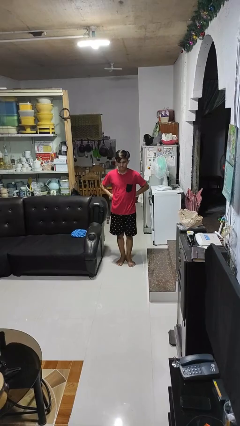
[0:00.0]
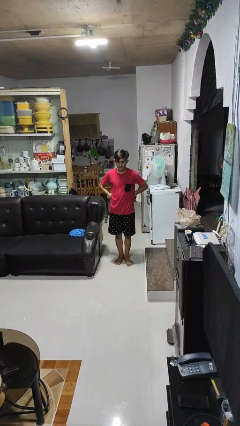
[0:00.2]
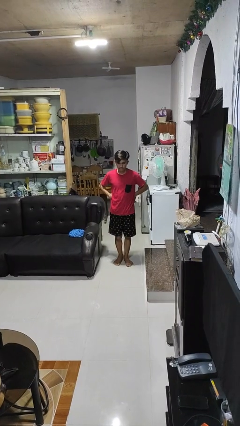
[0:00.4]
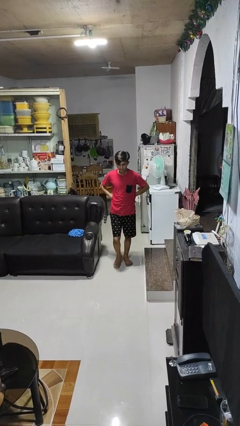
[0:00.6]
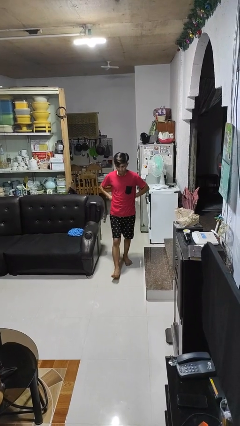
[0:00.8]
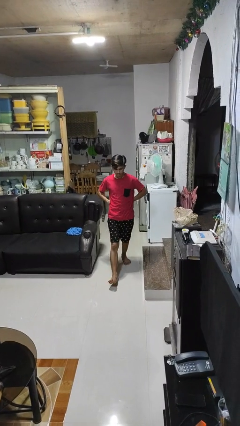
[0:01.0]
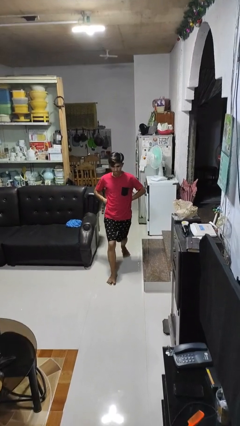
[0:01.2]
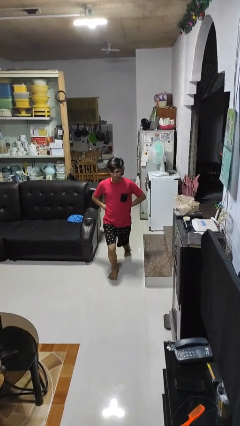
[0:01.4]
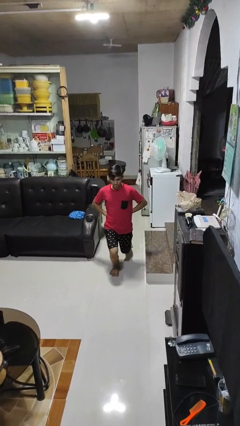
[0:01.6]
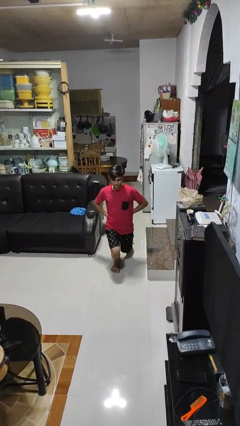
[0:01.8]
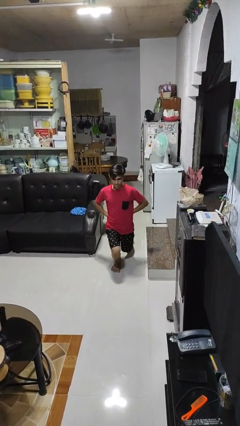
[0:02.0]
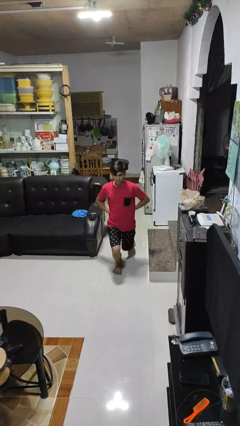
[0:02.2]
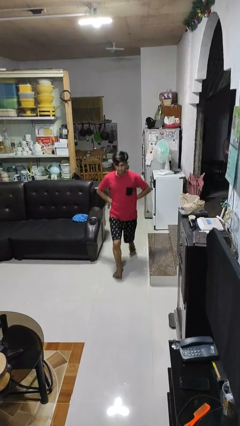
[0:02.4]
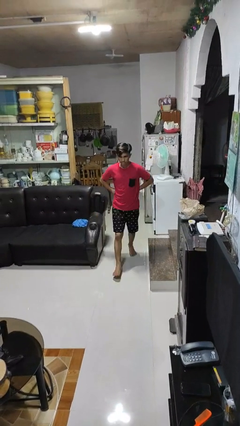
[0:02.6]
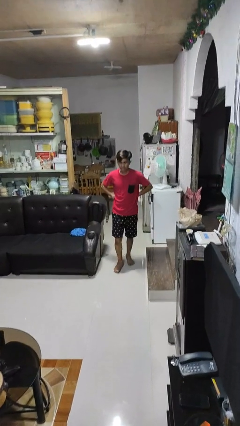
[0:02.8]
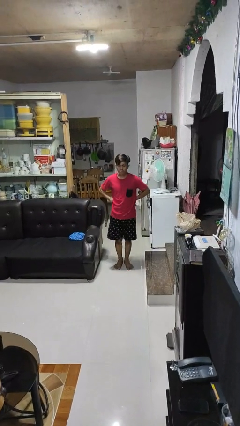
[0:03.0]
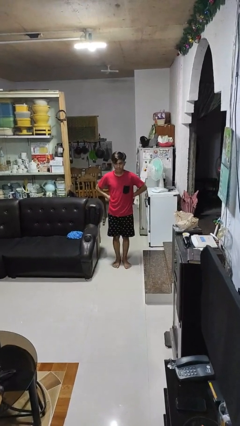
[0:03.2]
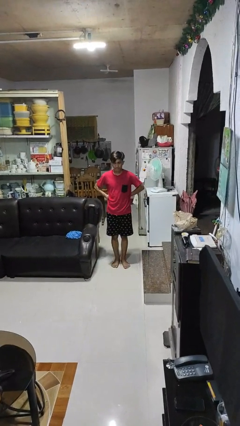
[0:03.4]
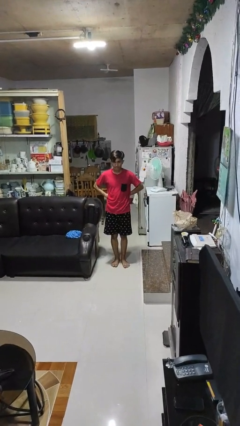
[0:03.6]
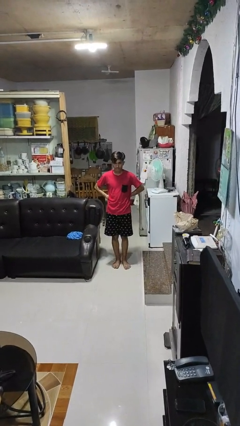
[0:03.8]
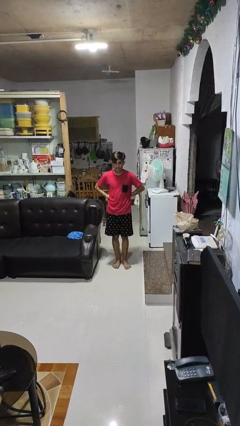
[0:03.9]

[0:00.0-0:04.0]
person exercises with lunges

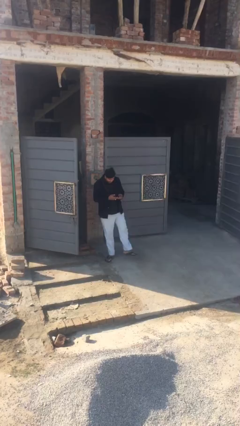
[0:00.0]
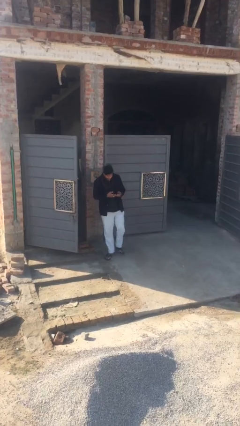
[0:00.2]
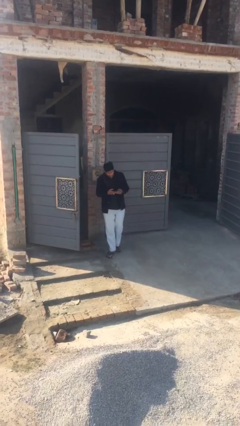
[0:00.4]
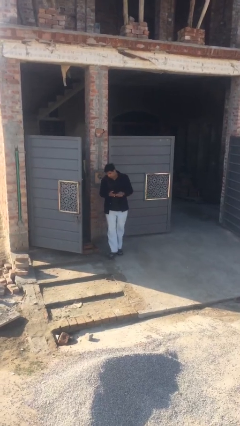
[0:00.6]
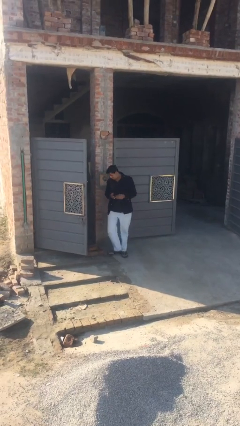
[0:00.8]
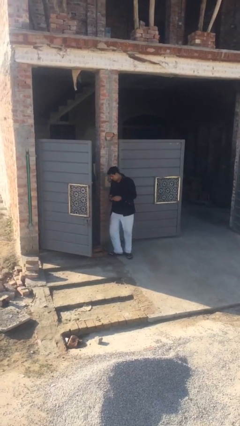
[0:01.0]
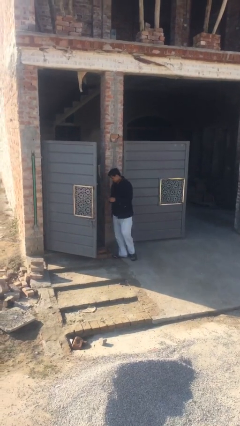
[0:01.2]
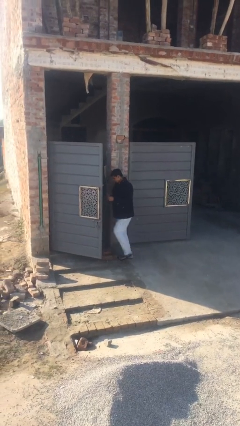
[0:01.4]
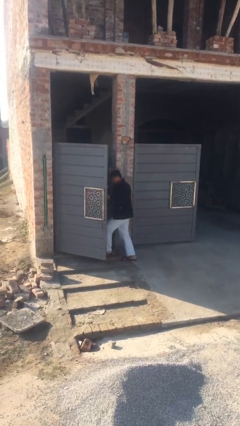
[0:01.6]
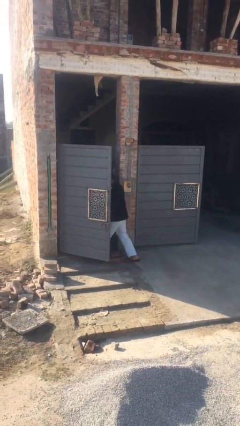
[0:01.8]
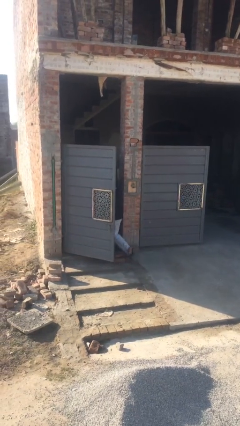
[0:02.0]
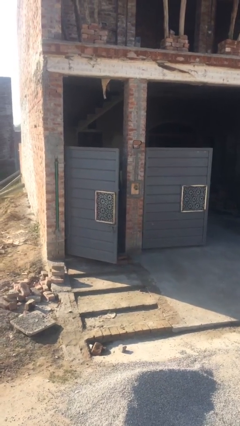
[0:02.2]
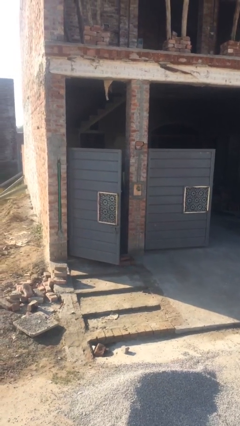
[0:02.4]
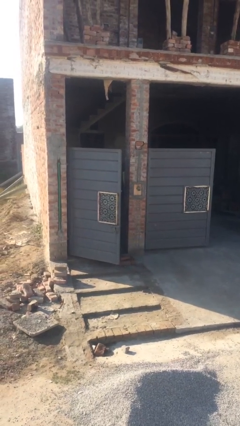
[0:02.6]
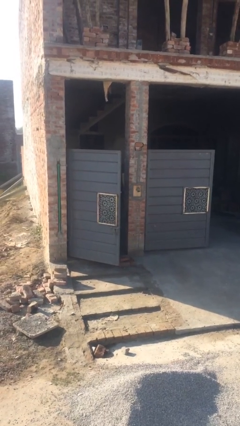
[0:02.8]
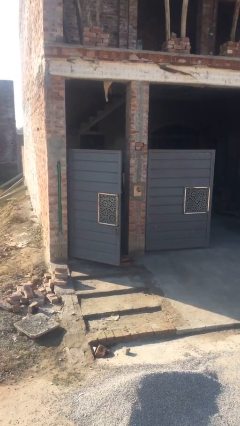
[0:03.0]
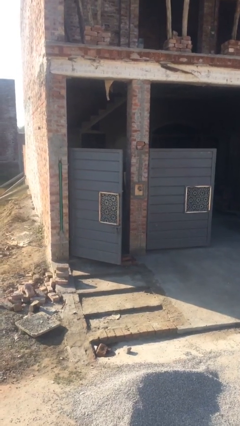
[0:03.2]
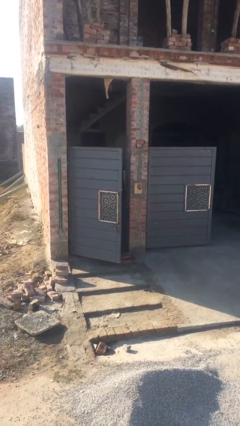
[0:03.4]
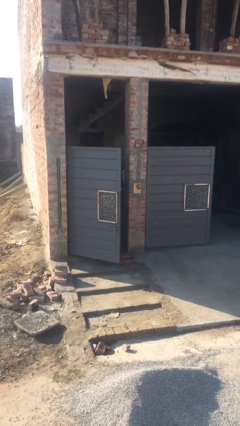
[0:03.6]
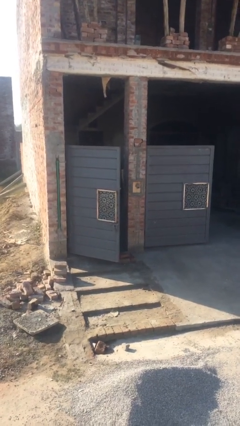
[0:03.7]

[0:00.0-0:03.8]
person exits scene through structure

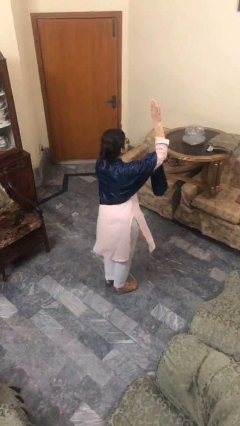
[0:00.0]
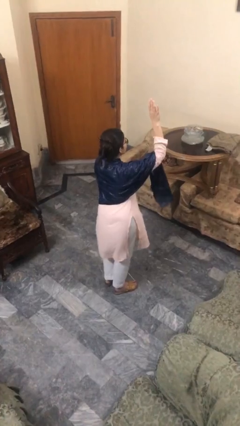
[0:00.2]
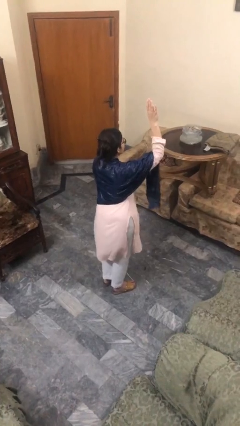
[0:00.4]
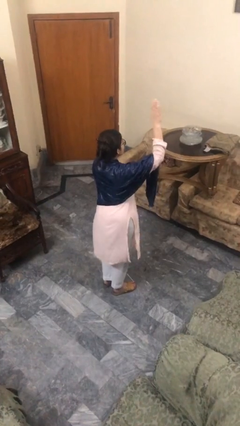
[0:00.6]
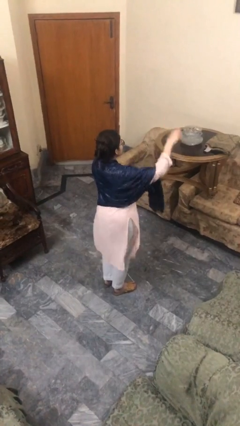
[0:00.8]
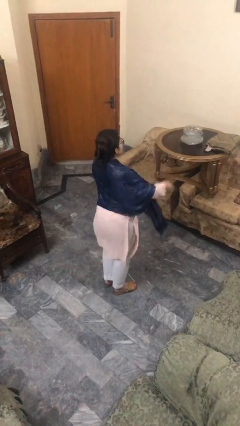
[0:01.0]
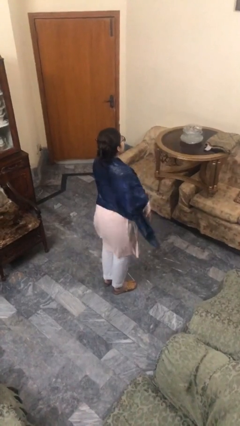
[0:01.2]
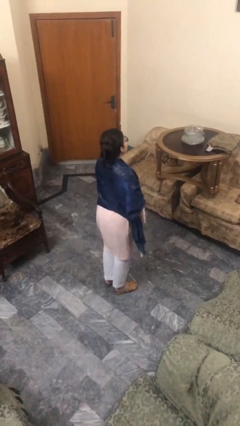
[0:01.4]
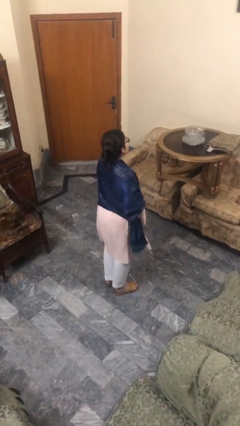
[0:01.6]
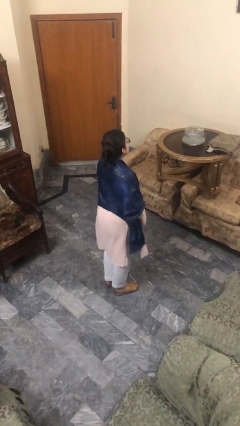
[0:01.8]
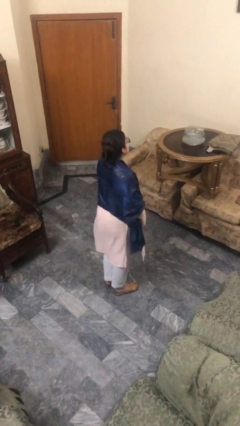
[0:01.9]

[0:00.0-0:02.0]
person gestures lower hand

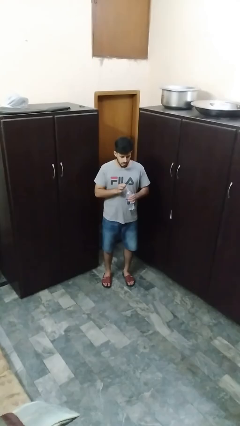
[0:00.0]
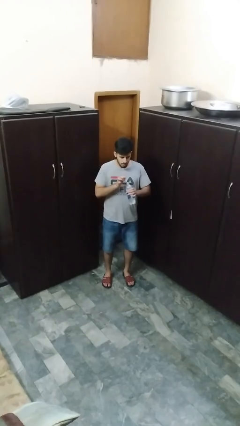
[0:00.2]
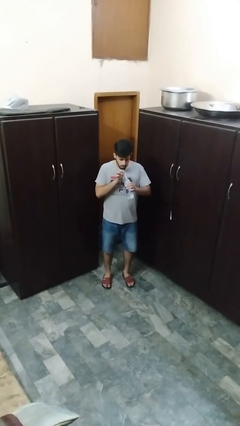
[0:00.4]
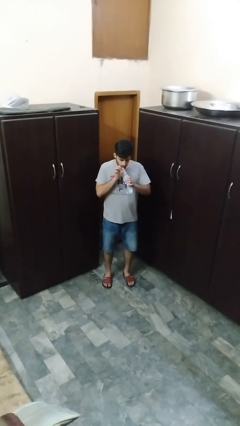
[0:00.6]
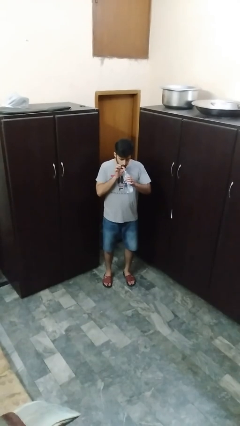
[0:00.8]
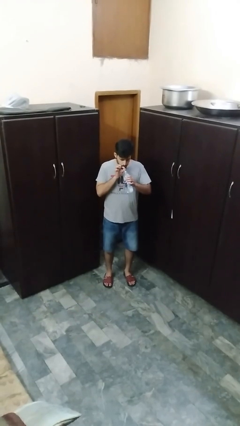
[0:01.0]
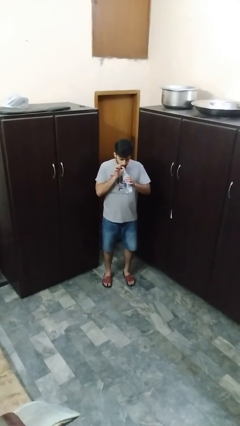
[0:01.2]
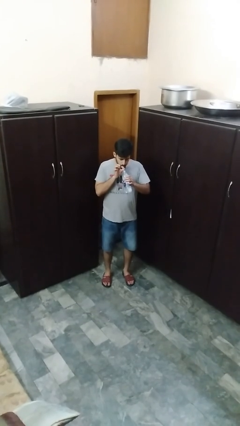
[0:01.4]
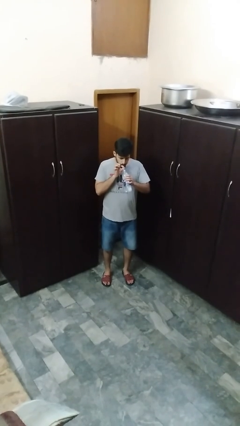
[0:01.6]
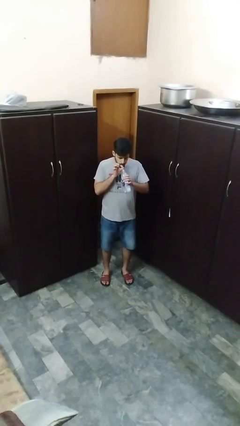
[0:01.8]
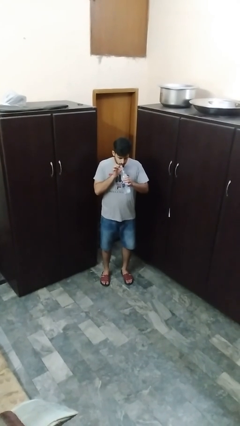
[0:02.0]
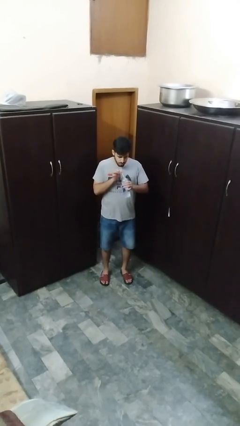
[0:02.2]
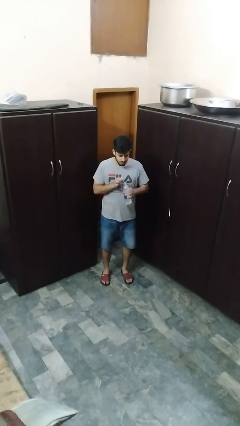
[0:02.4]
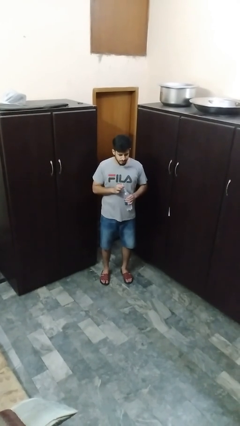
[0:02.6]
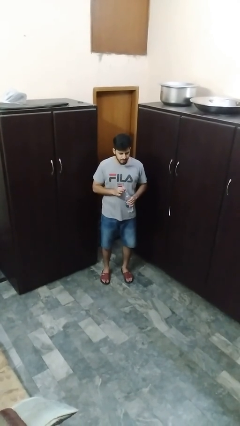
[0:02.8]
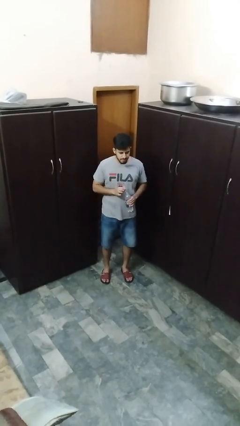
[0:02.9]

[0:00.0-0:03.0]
person drinks from straw

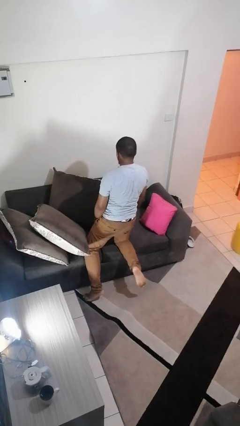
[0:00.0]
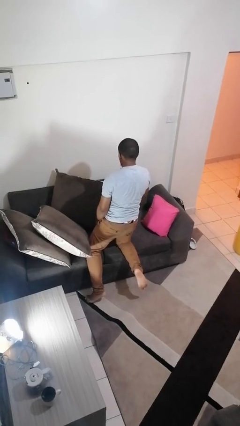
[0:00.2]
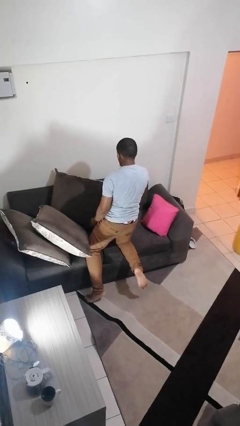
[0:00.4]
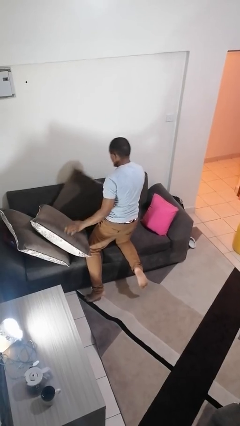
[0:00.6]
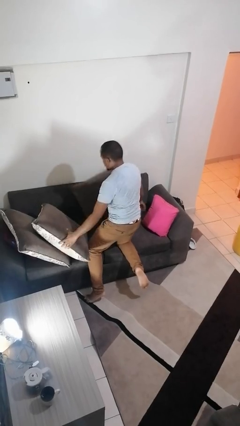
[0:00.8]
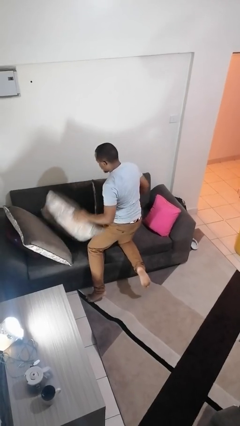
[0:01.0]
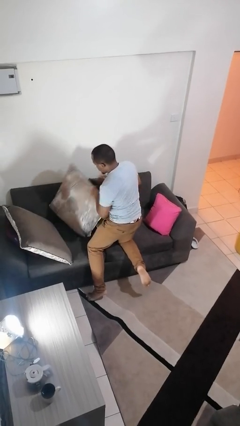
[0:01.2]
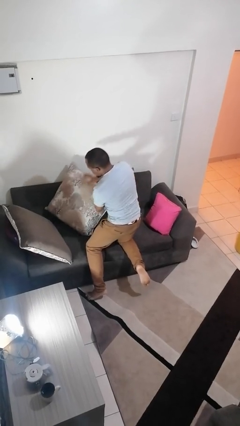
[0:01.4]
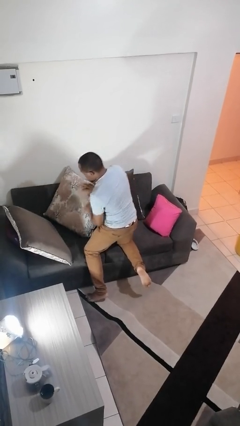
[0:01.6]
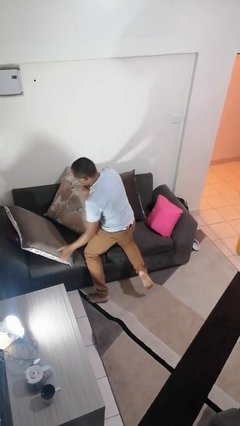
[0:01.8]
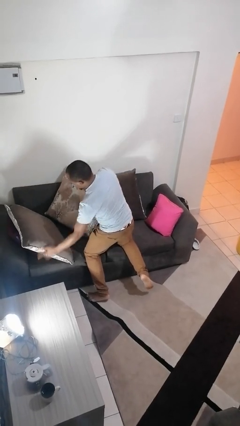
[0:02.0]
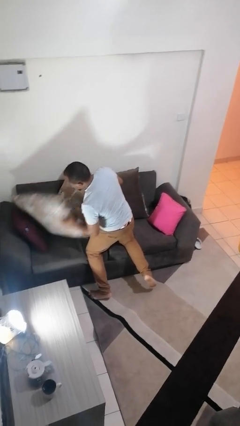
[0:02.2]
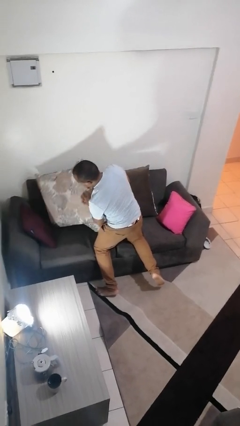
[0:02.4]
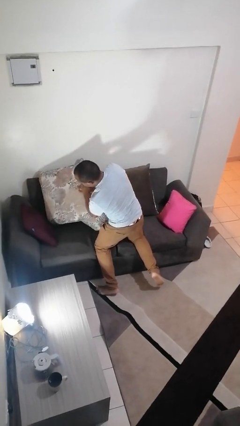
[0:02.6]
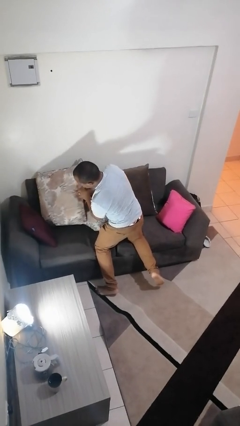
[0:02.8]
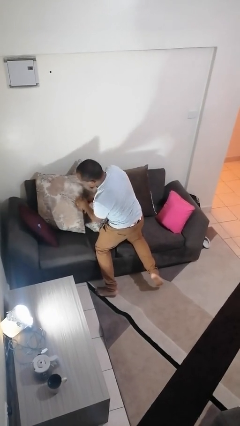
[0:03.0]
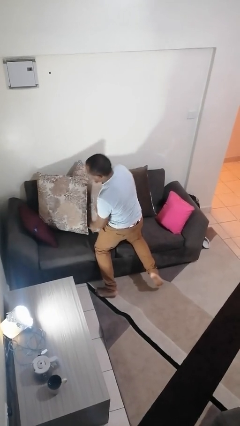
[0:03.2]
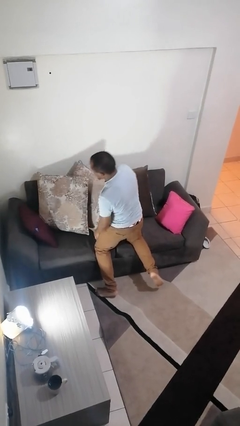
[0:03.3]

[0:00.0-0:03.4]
person searches in couch

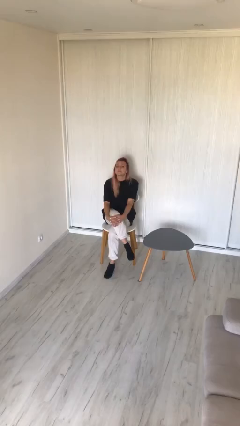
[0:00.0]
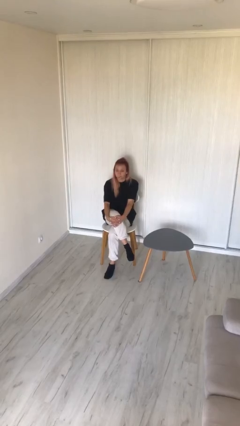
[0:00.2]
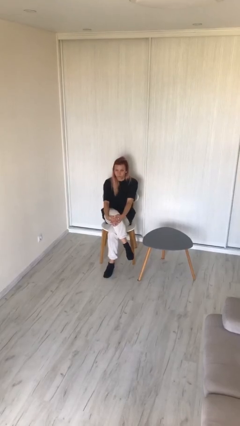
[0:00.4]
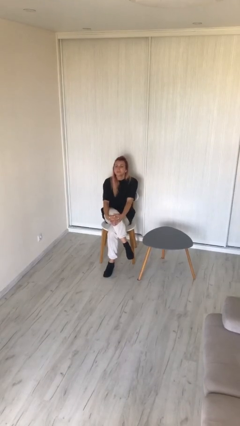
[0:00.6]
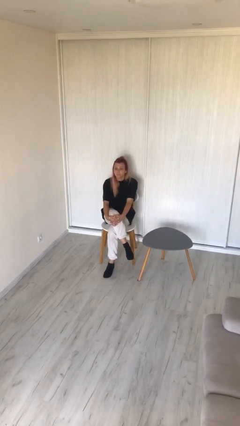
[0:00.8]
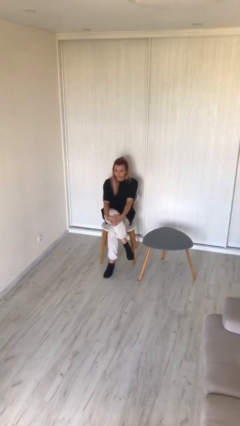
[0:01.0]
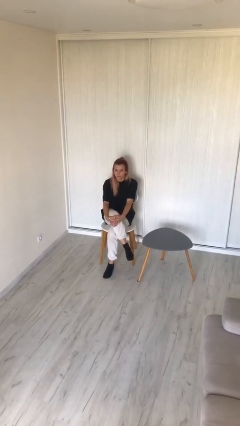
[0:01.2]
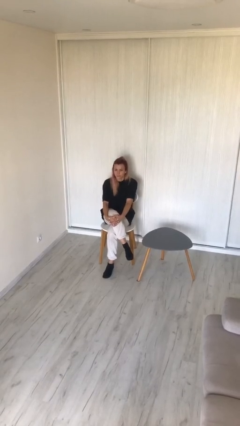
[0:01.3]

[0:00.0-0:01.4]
person nods head
